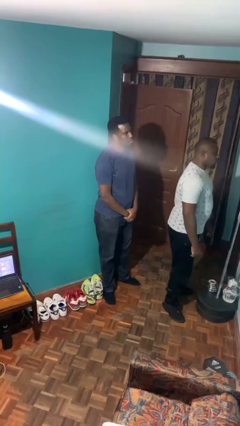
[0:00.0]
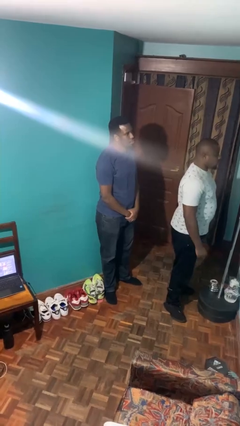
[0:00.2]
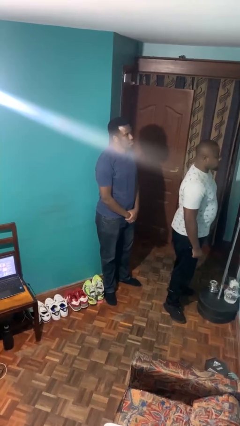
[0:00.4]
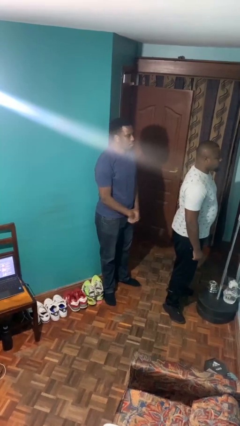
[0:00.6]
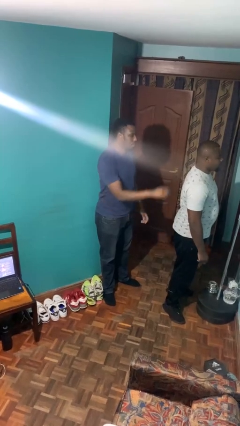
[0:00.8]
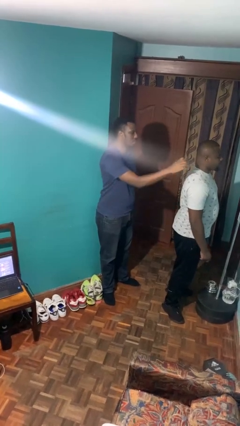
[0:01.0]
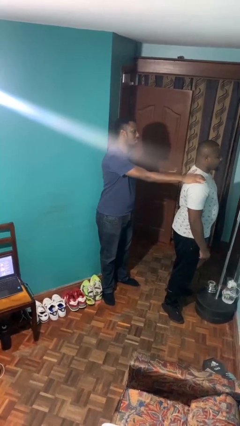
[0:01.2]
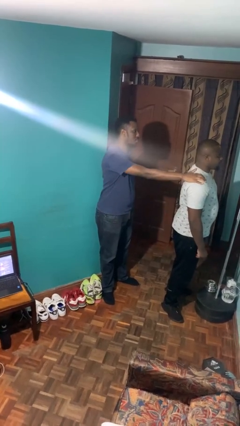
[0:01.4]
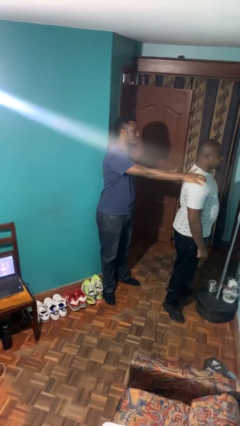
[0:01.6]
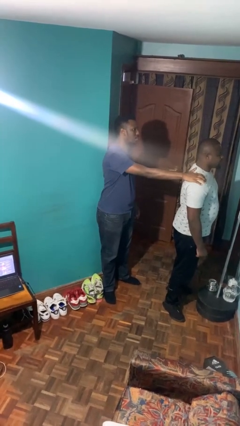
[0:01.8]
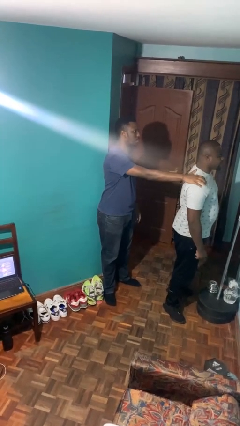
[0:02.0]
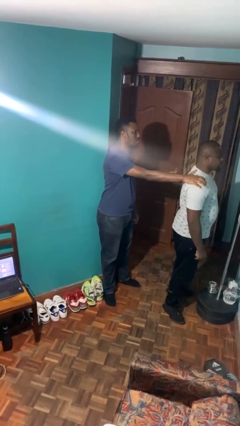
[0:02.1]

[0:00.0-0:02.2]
person grabs person by shoulder

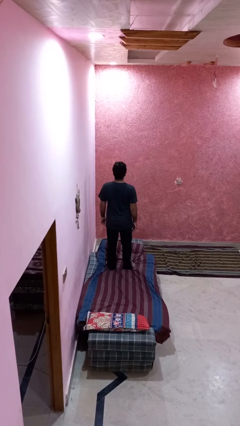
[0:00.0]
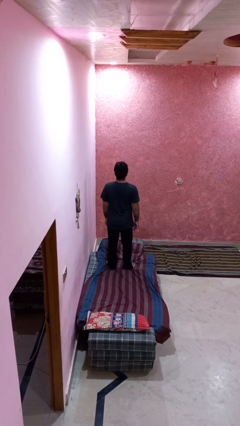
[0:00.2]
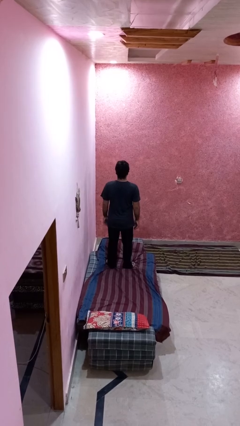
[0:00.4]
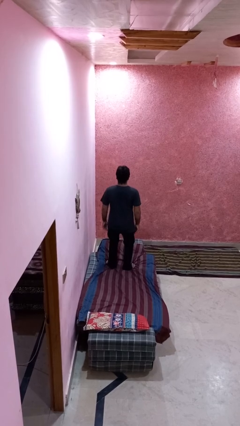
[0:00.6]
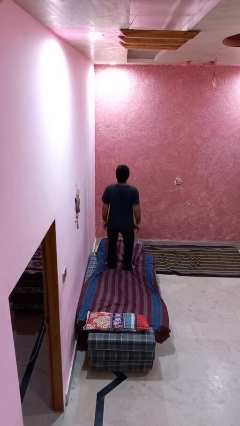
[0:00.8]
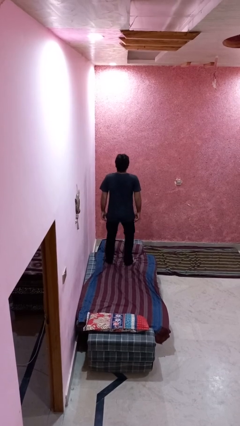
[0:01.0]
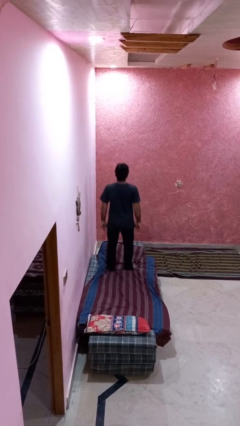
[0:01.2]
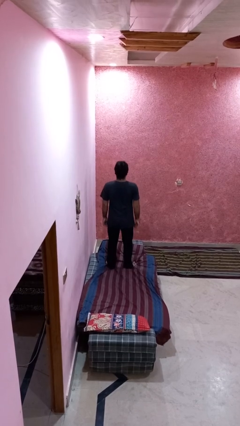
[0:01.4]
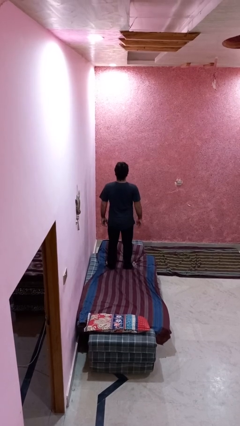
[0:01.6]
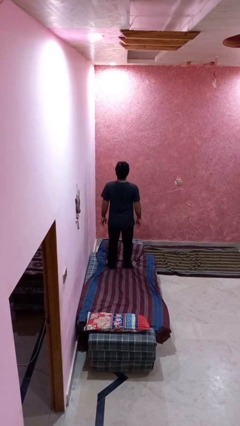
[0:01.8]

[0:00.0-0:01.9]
person jumps on bed

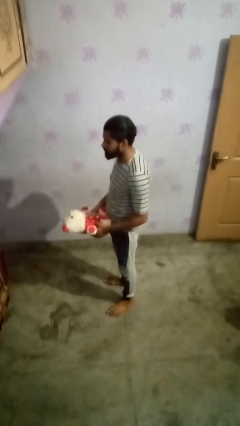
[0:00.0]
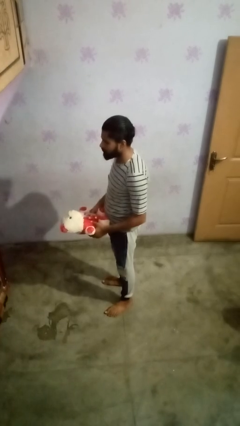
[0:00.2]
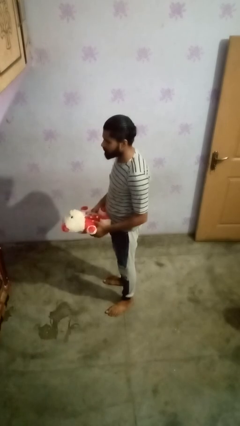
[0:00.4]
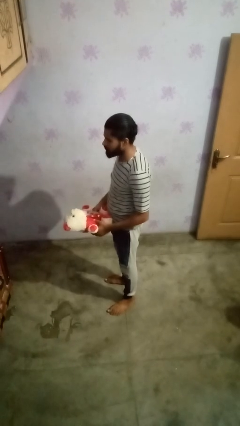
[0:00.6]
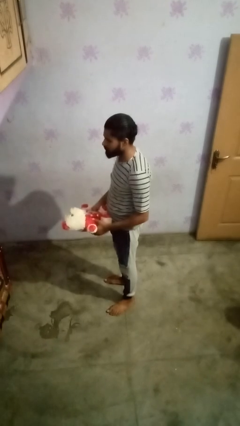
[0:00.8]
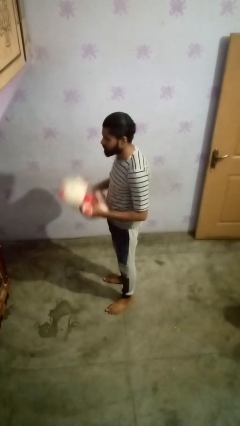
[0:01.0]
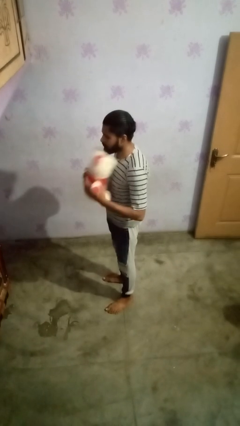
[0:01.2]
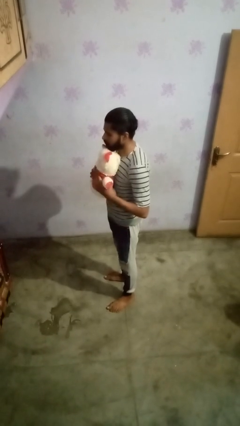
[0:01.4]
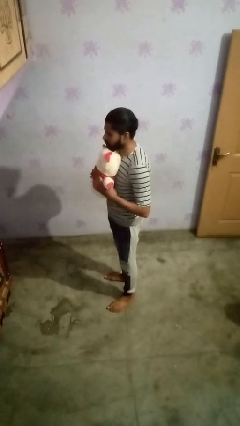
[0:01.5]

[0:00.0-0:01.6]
person hugs stuffed animal

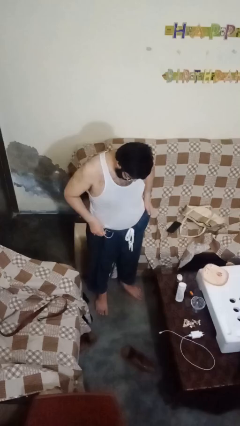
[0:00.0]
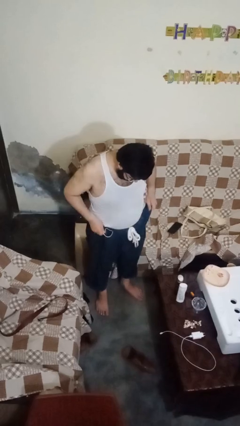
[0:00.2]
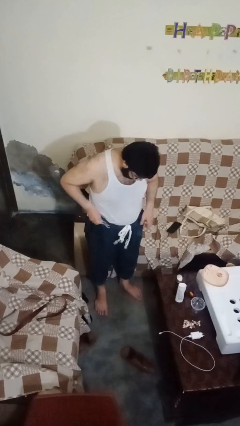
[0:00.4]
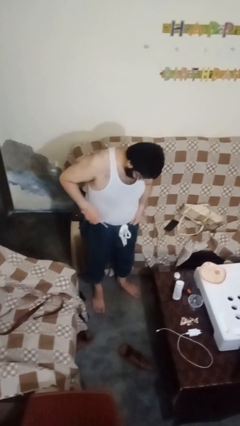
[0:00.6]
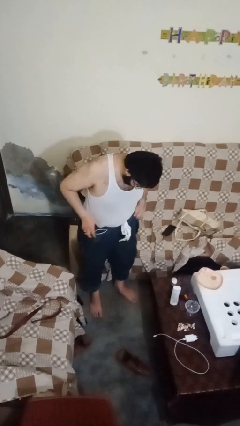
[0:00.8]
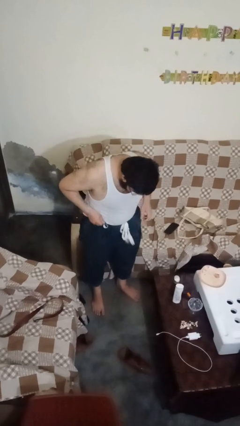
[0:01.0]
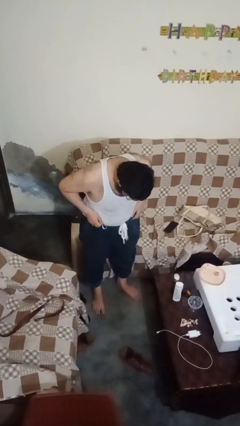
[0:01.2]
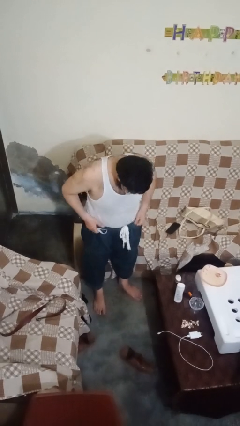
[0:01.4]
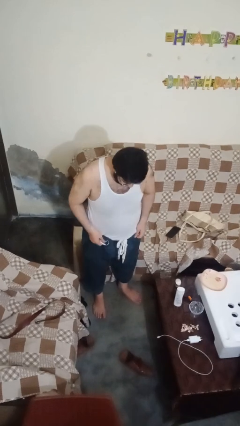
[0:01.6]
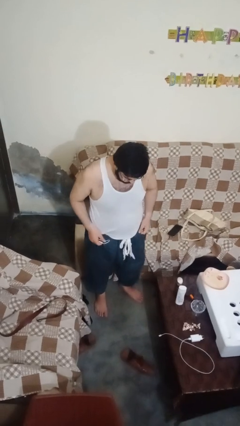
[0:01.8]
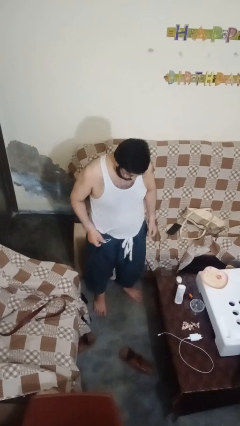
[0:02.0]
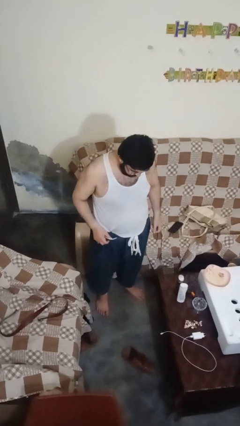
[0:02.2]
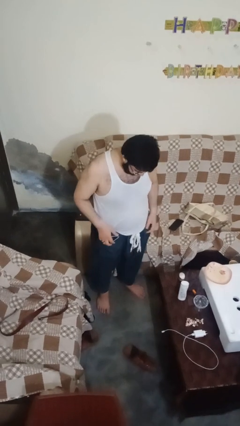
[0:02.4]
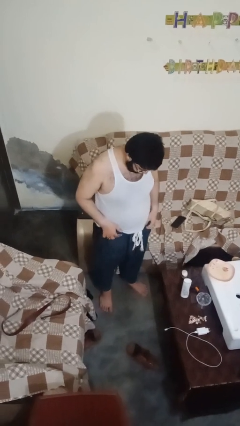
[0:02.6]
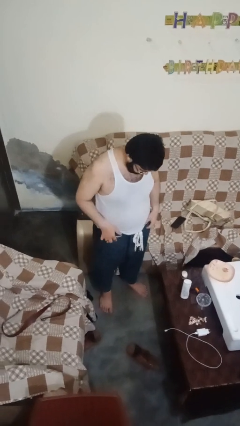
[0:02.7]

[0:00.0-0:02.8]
person hikes up pants

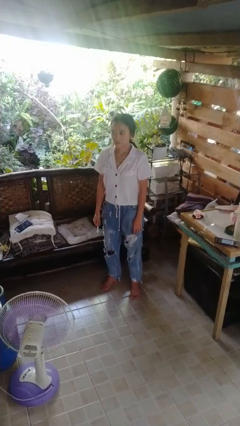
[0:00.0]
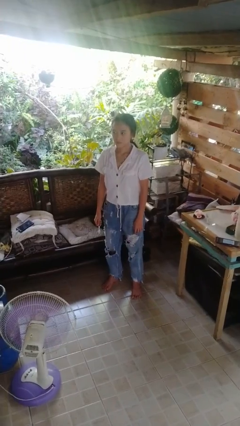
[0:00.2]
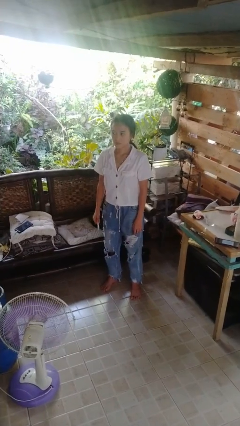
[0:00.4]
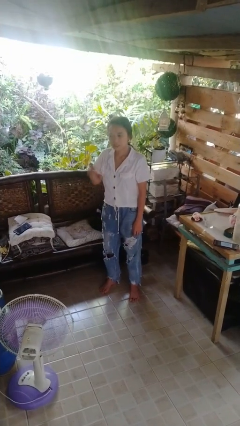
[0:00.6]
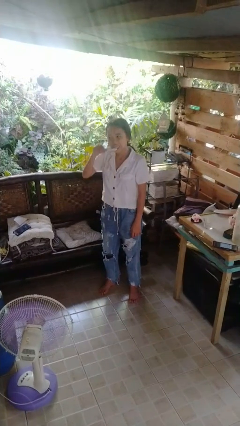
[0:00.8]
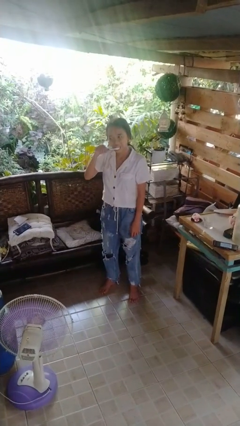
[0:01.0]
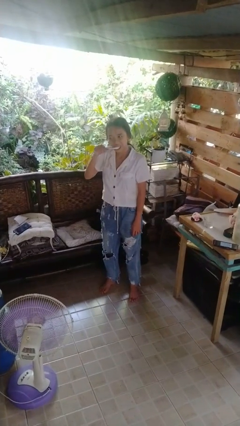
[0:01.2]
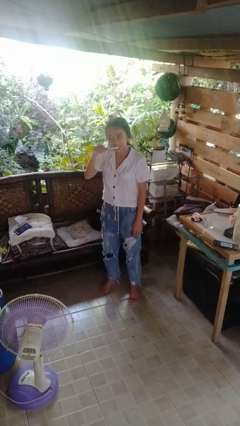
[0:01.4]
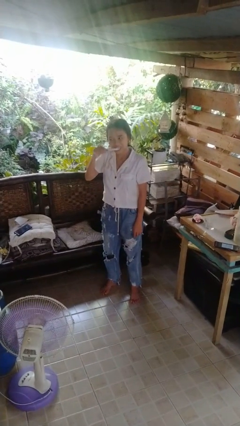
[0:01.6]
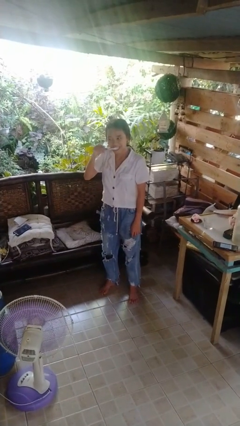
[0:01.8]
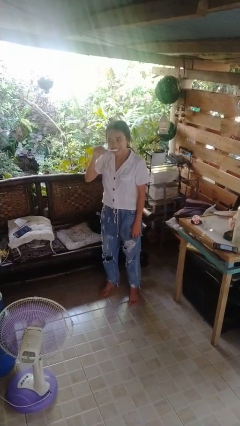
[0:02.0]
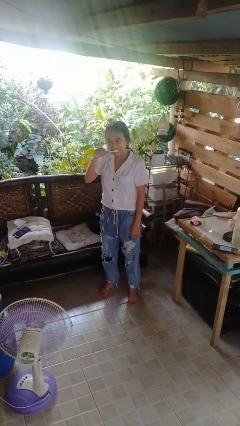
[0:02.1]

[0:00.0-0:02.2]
person brushes teeth

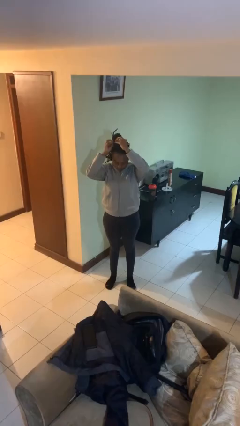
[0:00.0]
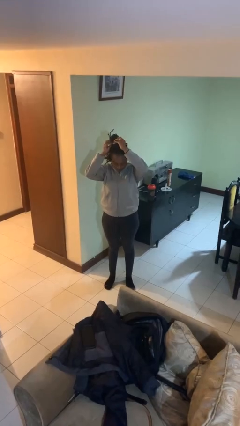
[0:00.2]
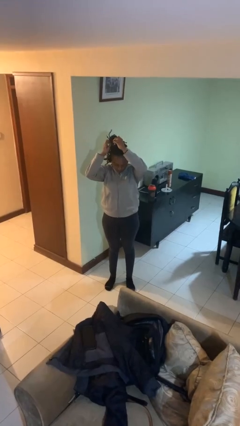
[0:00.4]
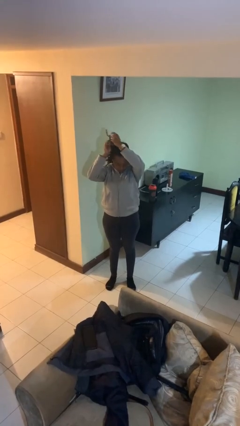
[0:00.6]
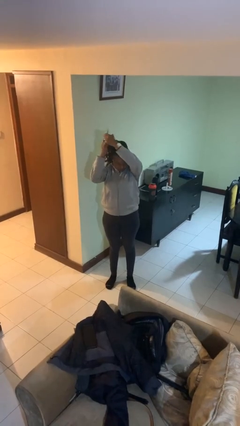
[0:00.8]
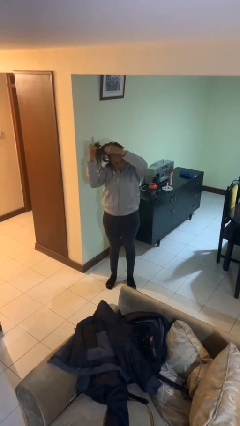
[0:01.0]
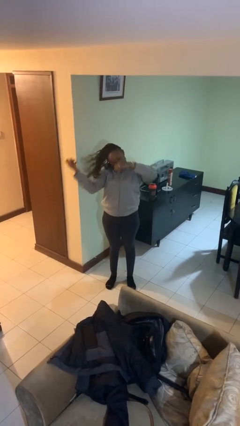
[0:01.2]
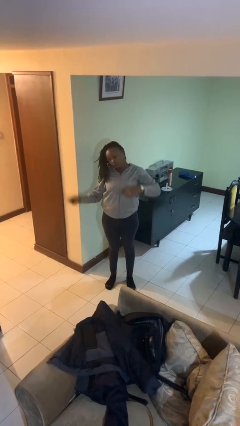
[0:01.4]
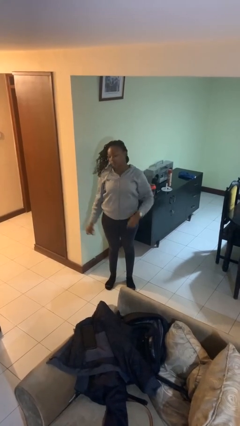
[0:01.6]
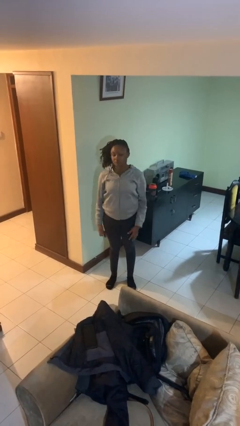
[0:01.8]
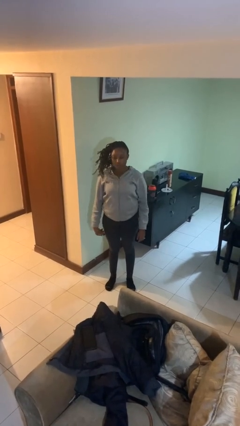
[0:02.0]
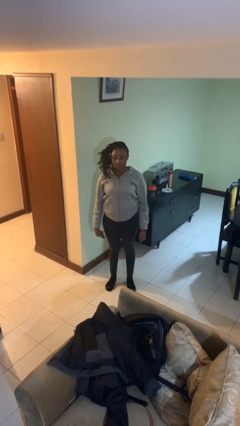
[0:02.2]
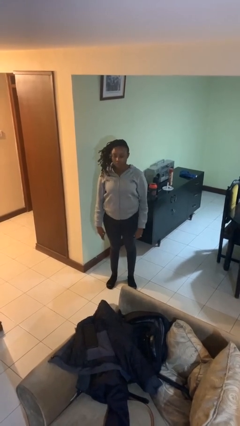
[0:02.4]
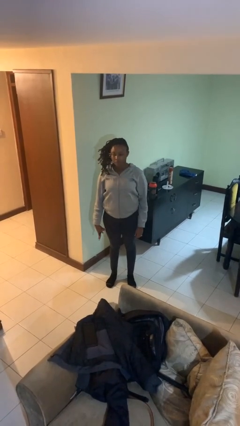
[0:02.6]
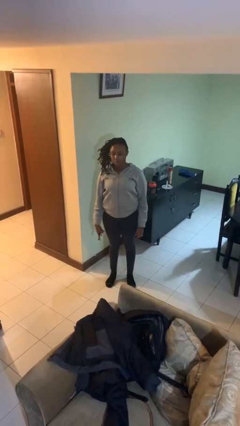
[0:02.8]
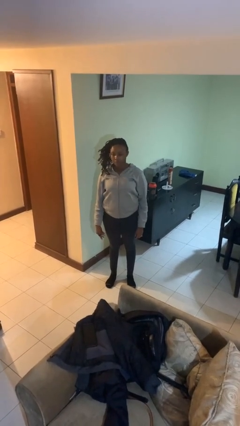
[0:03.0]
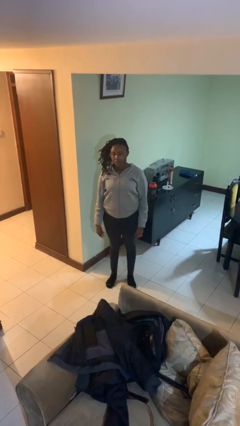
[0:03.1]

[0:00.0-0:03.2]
person takes off hairtie

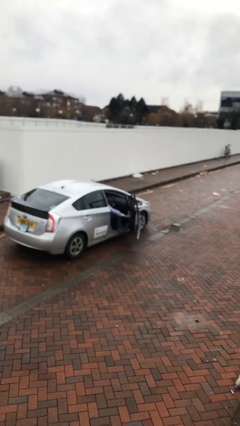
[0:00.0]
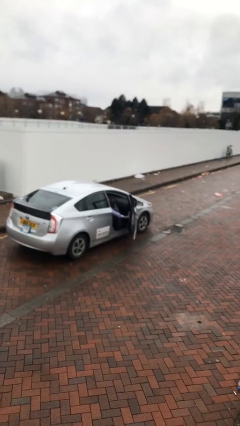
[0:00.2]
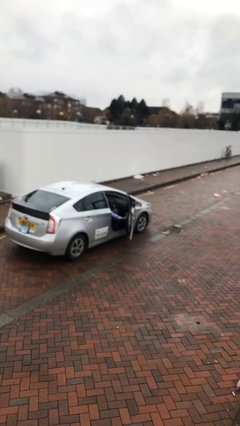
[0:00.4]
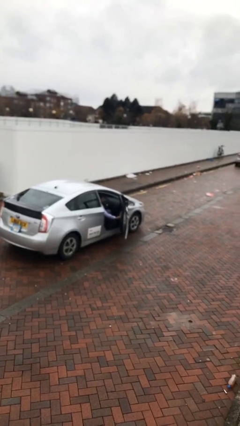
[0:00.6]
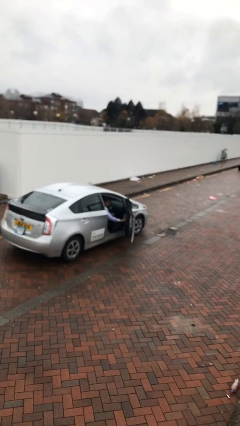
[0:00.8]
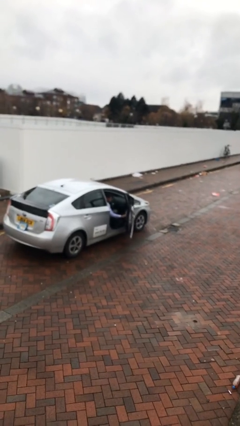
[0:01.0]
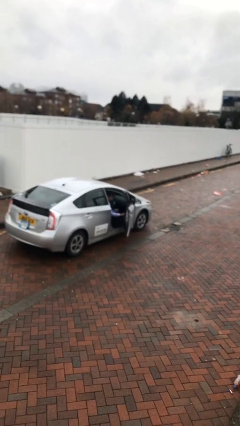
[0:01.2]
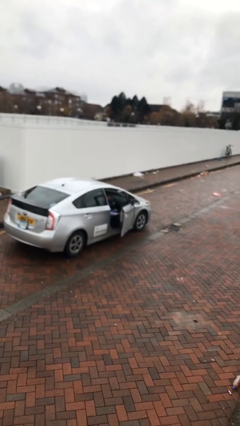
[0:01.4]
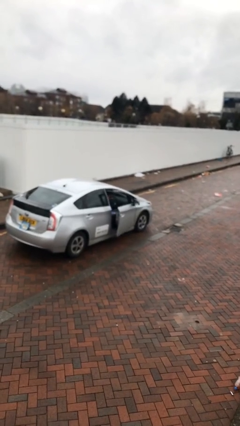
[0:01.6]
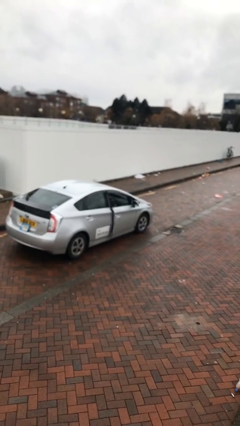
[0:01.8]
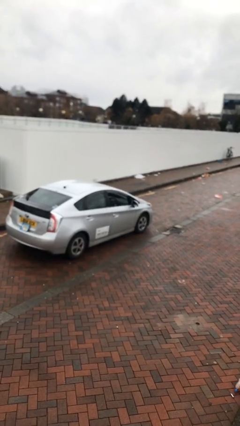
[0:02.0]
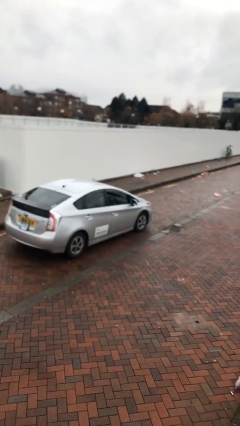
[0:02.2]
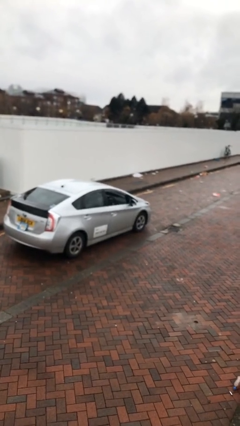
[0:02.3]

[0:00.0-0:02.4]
person closes car door

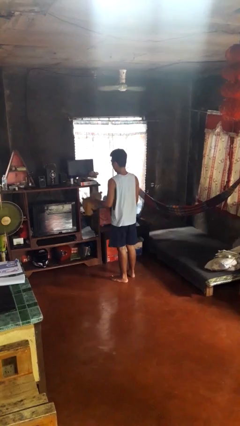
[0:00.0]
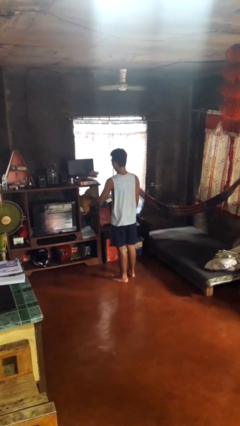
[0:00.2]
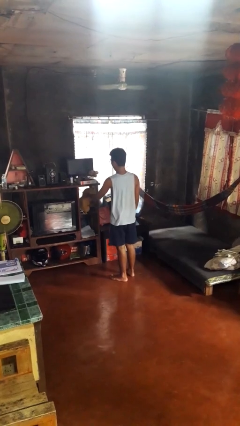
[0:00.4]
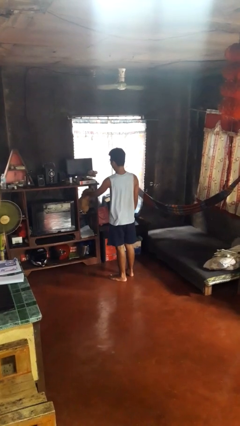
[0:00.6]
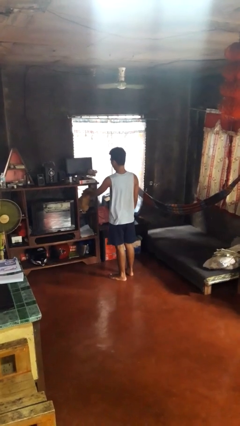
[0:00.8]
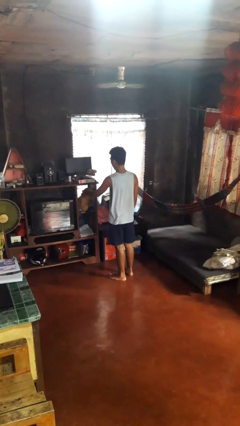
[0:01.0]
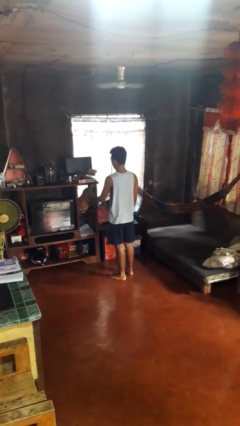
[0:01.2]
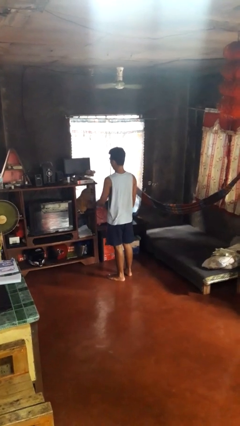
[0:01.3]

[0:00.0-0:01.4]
person puts down object into cabinet
